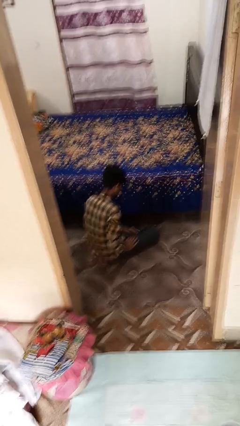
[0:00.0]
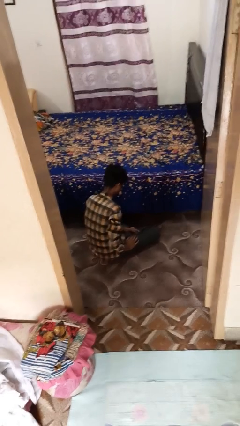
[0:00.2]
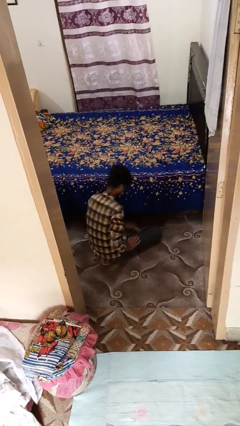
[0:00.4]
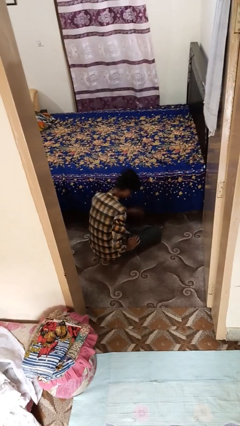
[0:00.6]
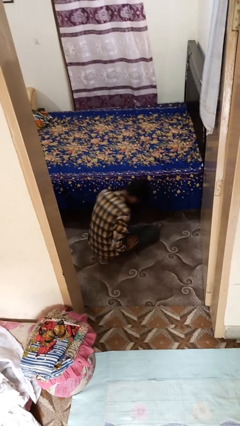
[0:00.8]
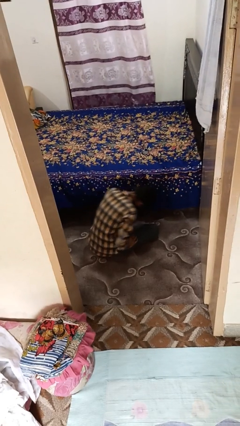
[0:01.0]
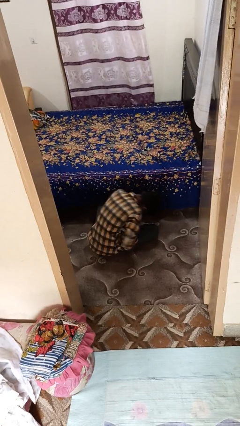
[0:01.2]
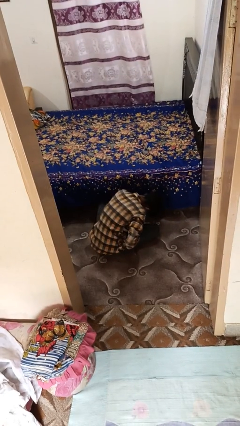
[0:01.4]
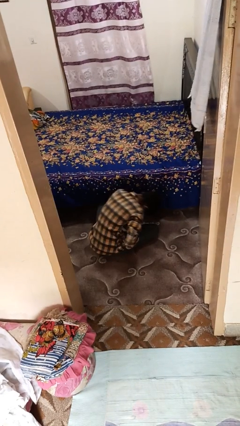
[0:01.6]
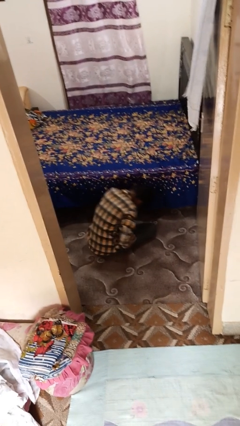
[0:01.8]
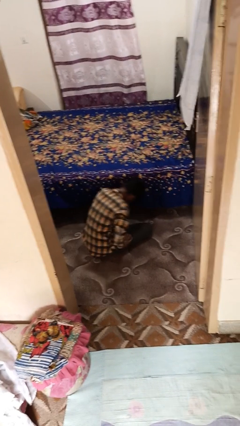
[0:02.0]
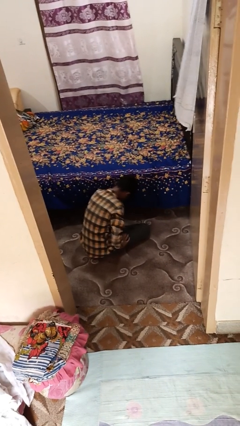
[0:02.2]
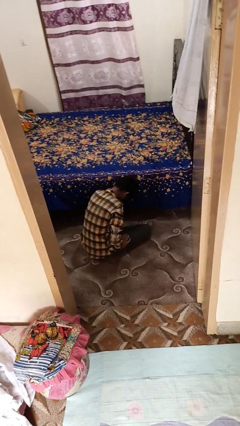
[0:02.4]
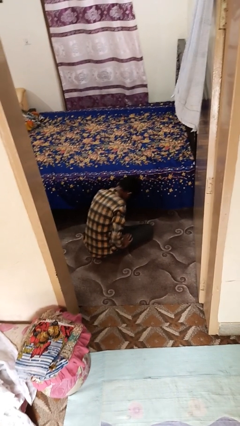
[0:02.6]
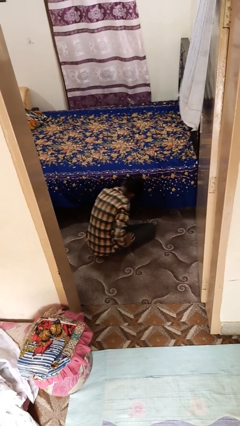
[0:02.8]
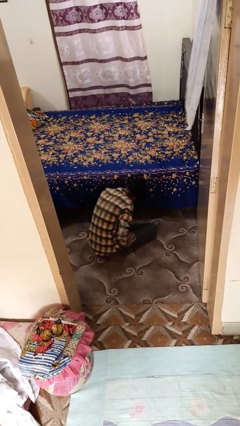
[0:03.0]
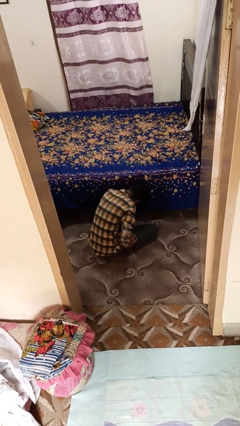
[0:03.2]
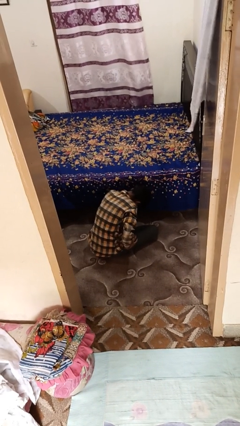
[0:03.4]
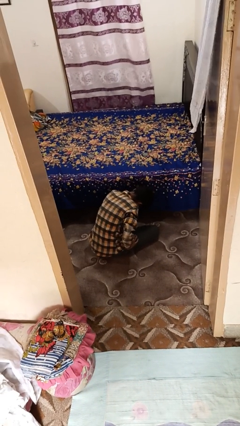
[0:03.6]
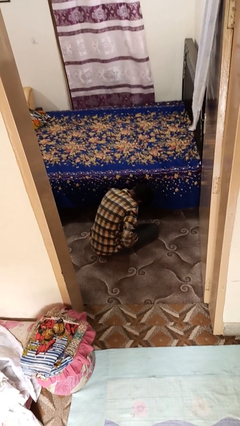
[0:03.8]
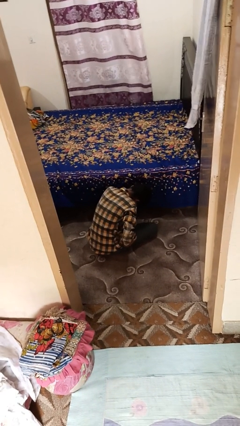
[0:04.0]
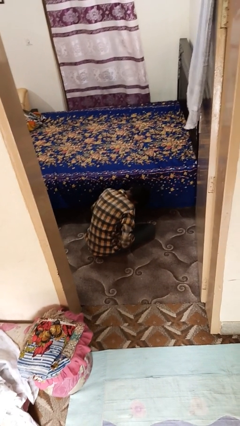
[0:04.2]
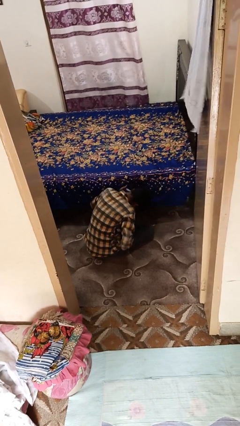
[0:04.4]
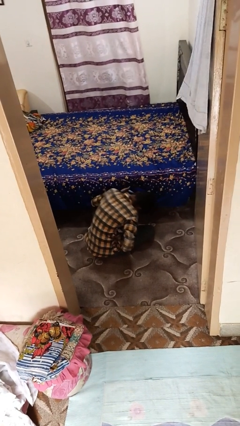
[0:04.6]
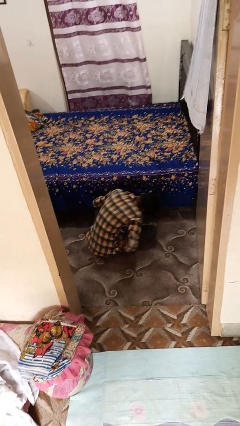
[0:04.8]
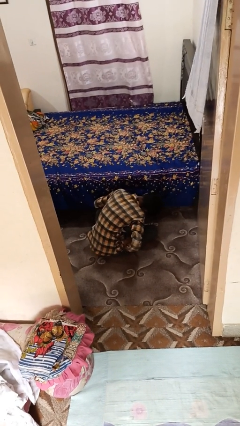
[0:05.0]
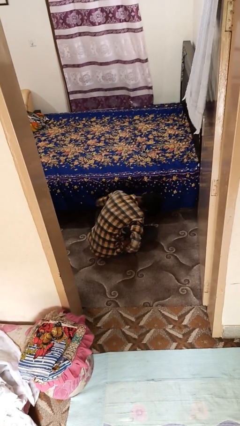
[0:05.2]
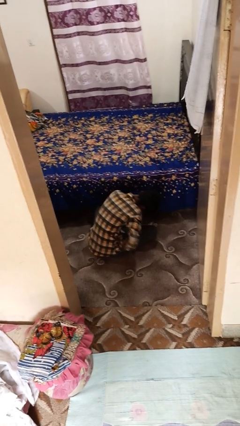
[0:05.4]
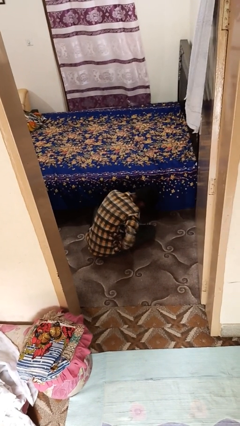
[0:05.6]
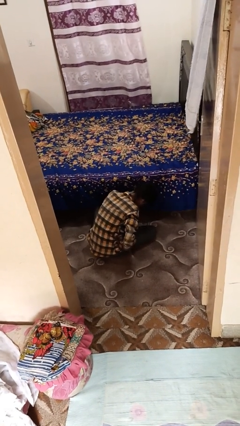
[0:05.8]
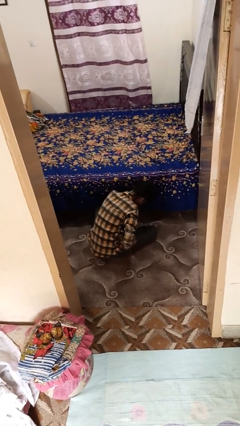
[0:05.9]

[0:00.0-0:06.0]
person searches under bed

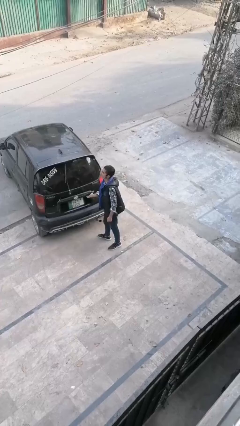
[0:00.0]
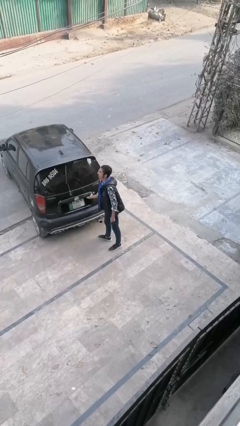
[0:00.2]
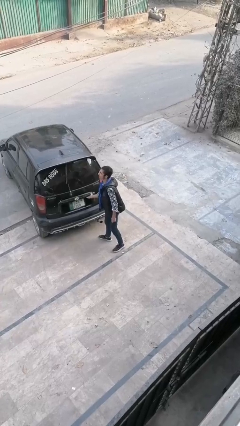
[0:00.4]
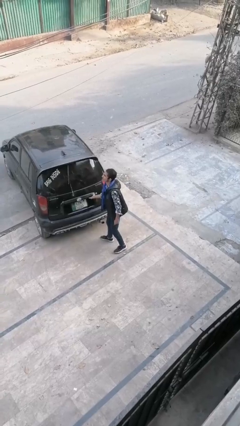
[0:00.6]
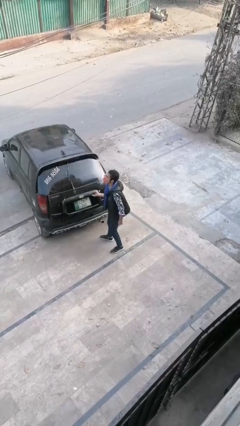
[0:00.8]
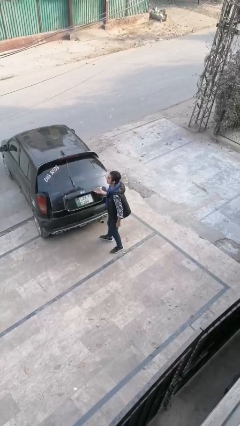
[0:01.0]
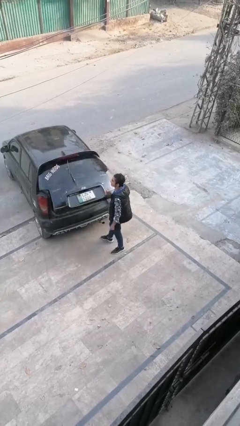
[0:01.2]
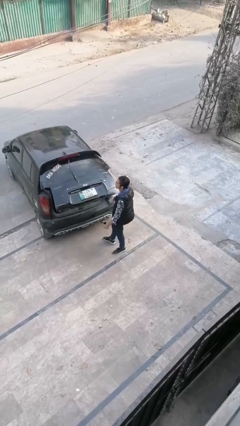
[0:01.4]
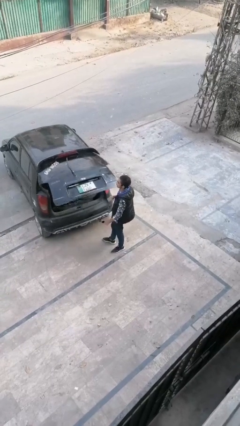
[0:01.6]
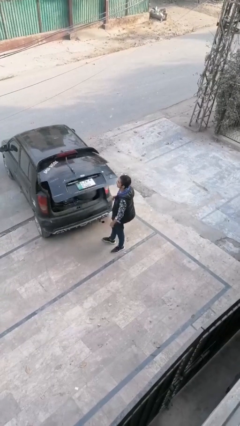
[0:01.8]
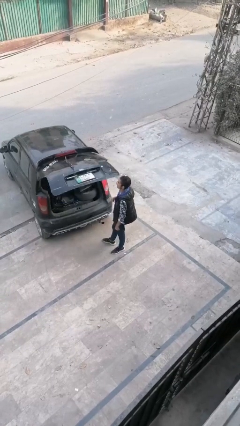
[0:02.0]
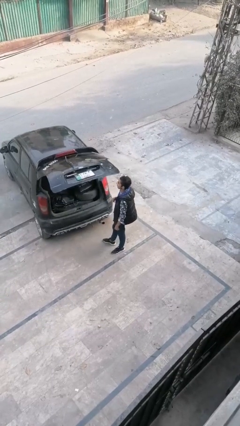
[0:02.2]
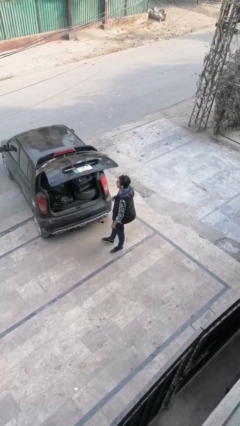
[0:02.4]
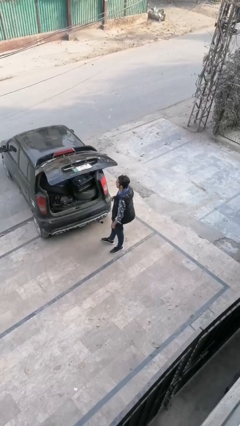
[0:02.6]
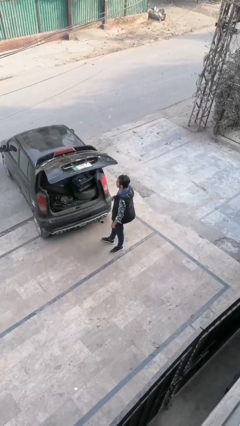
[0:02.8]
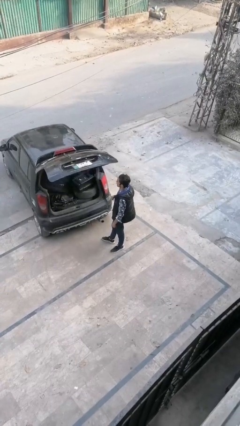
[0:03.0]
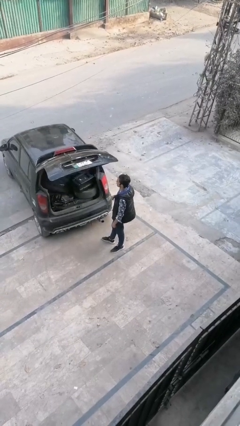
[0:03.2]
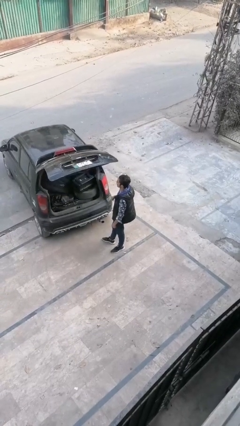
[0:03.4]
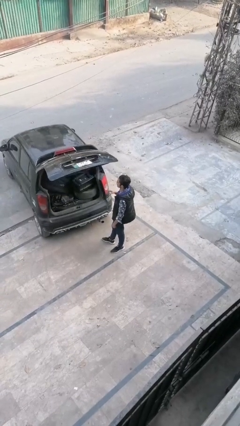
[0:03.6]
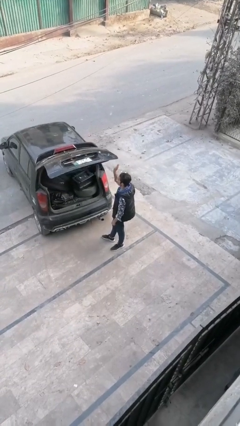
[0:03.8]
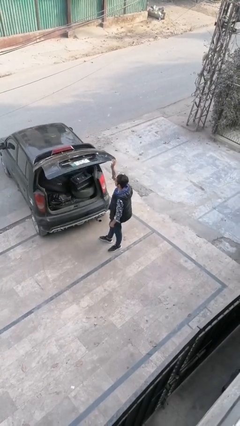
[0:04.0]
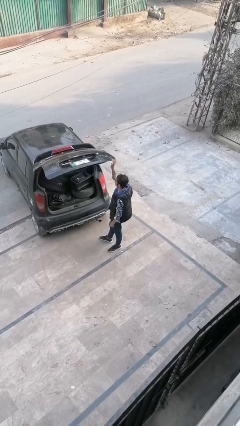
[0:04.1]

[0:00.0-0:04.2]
person opens car trunk

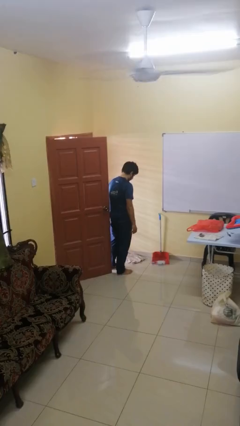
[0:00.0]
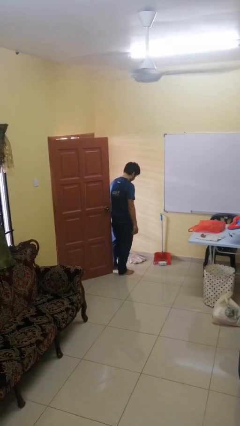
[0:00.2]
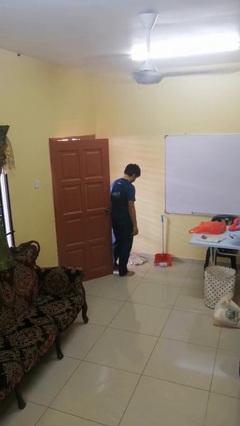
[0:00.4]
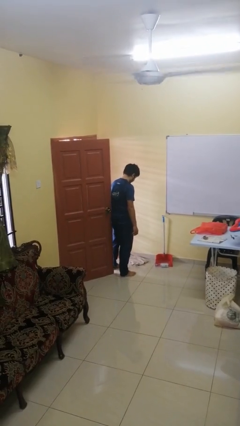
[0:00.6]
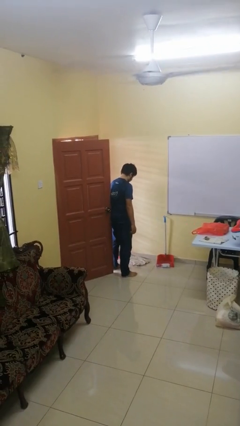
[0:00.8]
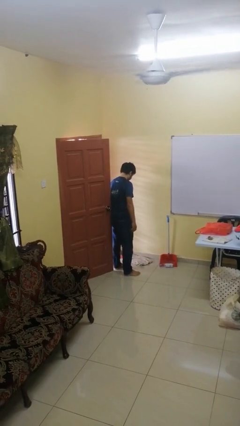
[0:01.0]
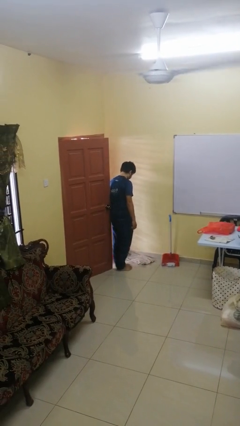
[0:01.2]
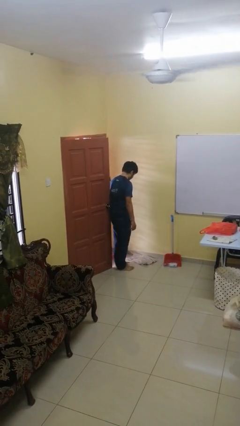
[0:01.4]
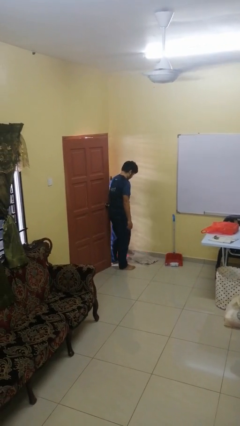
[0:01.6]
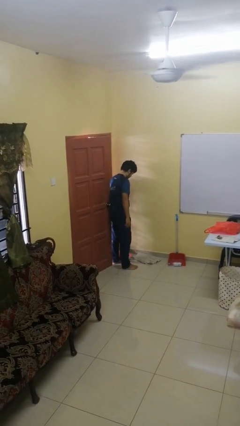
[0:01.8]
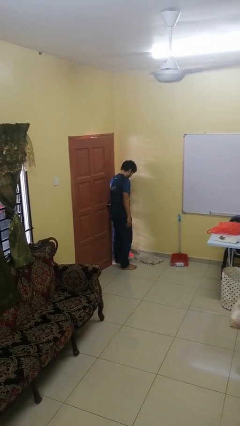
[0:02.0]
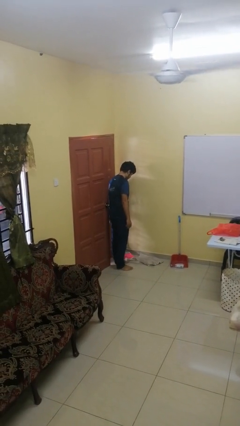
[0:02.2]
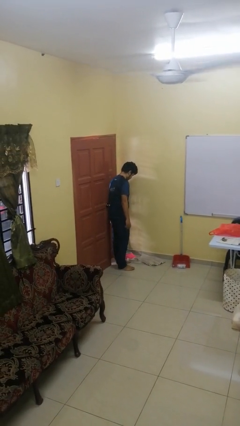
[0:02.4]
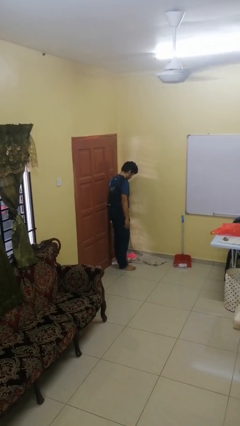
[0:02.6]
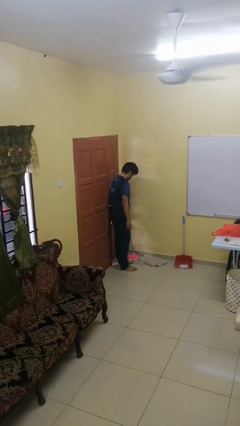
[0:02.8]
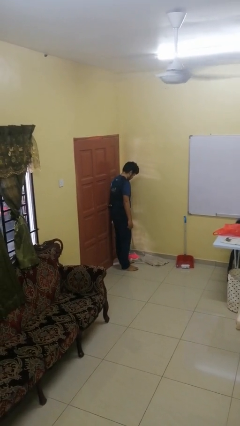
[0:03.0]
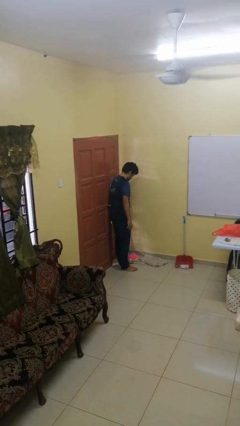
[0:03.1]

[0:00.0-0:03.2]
person closes door with hip

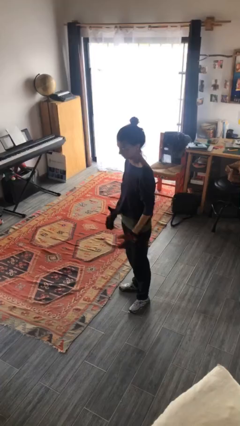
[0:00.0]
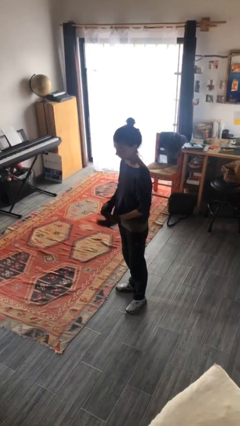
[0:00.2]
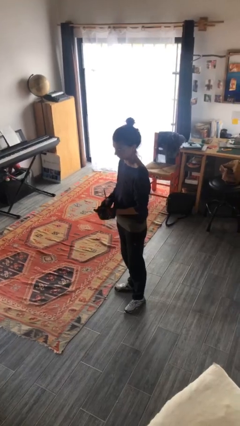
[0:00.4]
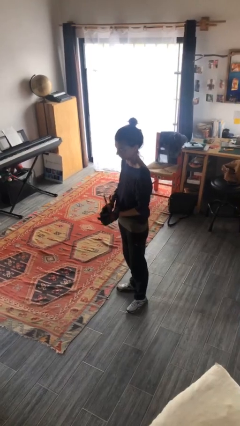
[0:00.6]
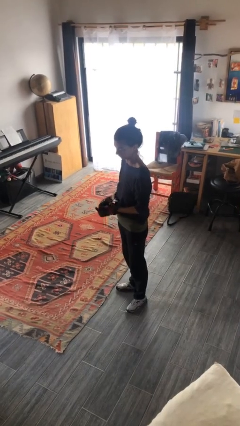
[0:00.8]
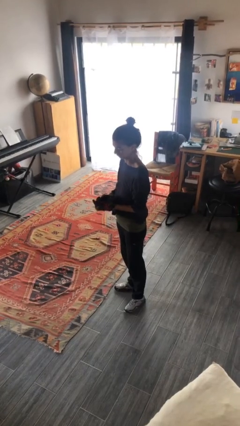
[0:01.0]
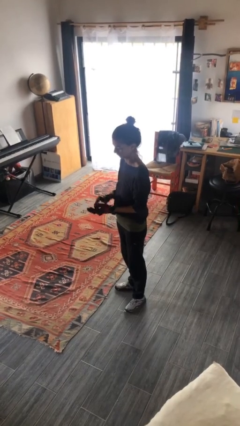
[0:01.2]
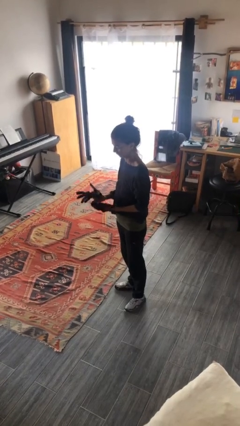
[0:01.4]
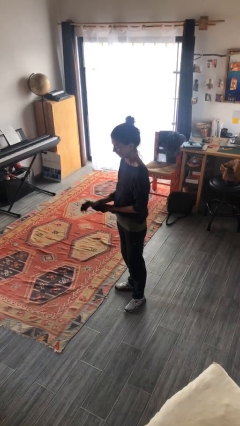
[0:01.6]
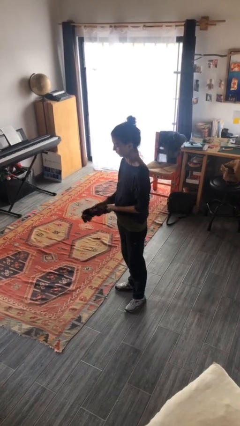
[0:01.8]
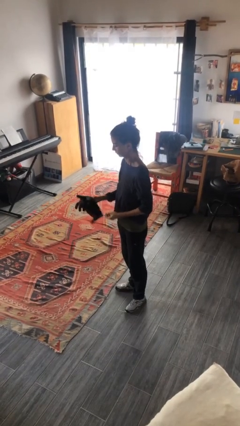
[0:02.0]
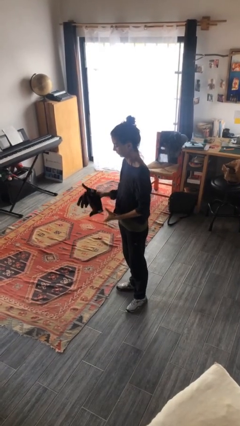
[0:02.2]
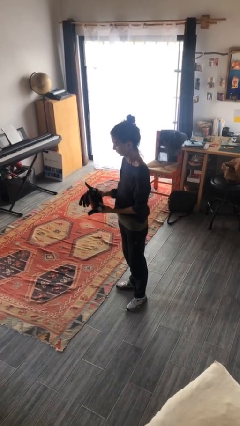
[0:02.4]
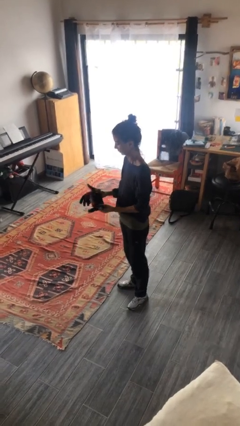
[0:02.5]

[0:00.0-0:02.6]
person takes off gloves

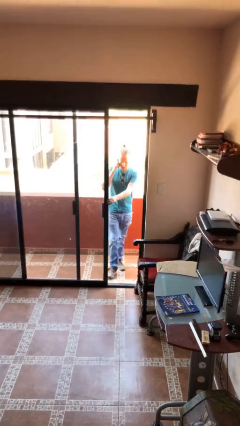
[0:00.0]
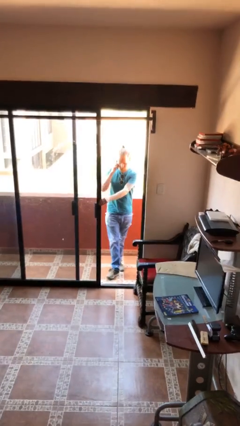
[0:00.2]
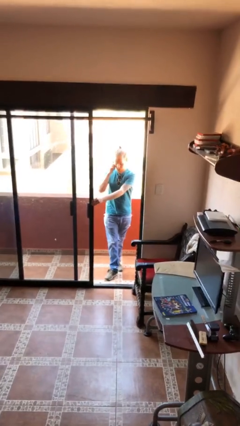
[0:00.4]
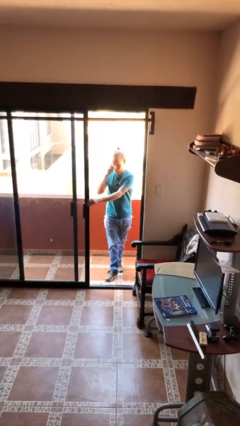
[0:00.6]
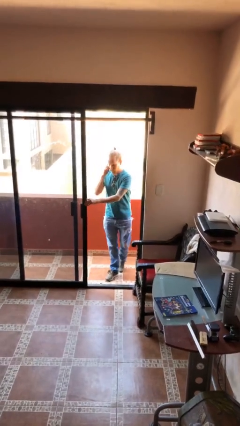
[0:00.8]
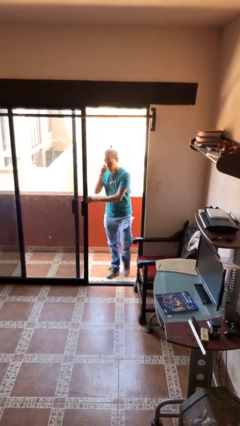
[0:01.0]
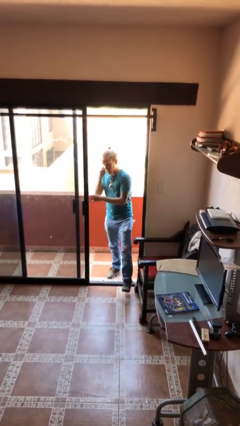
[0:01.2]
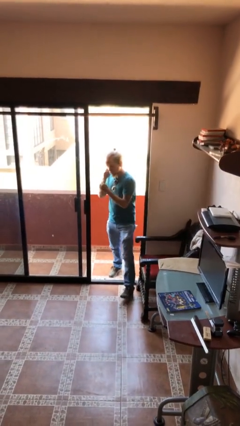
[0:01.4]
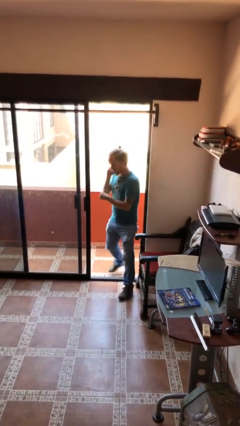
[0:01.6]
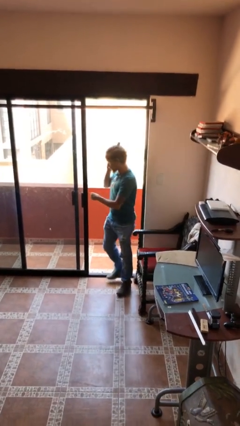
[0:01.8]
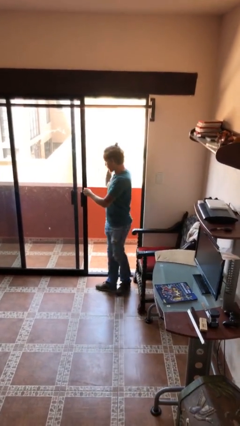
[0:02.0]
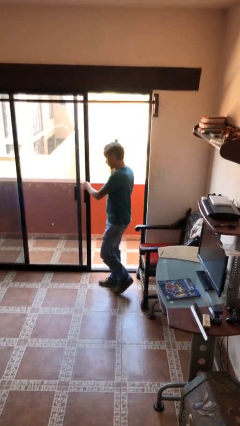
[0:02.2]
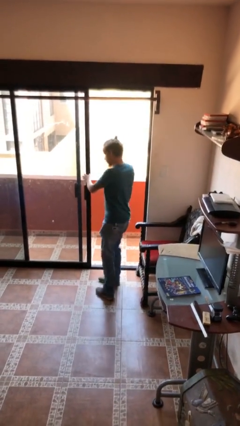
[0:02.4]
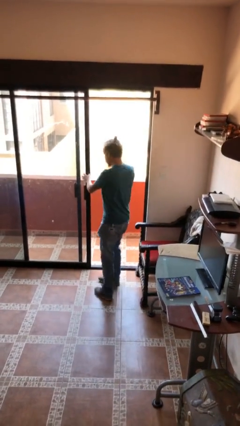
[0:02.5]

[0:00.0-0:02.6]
person enters scene through structure
